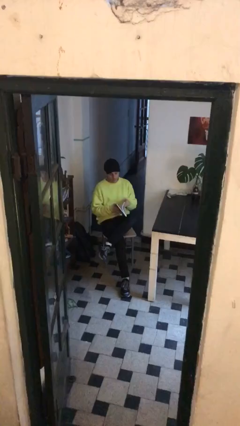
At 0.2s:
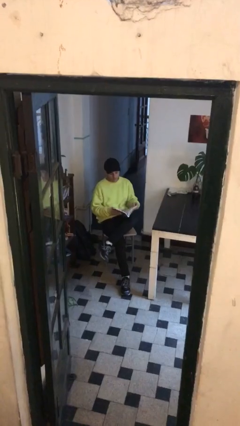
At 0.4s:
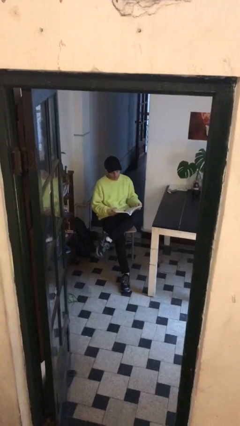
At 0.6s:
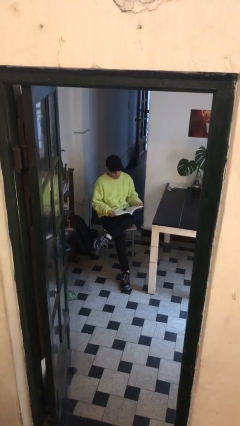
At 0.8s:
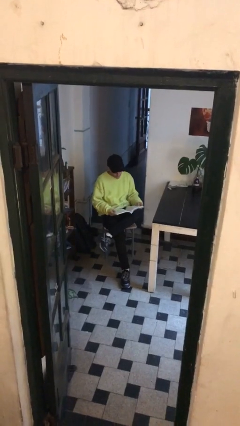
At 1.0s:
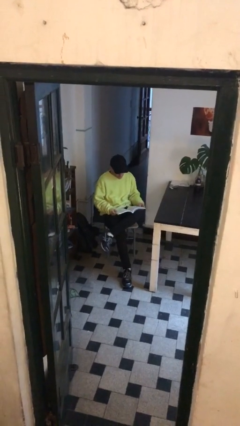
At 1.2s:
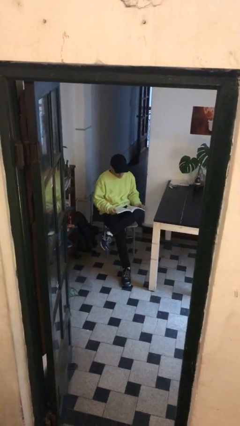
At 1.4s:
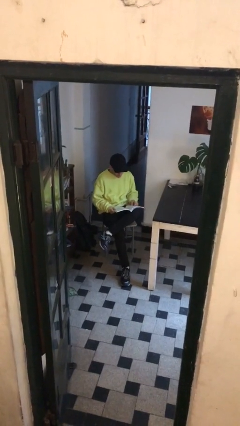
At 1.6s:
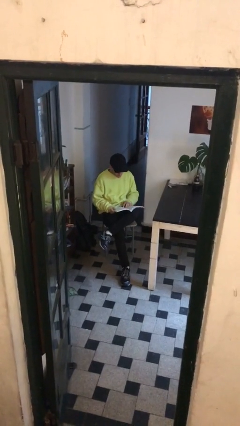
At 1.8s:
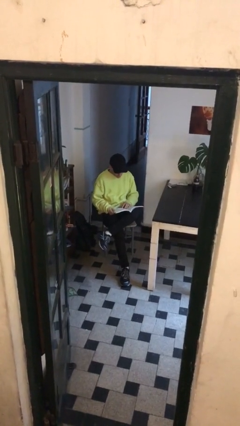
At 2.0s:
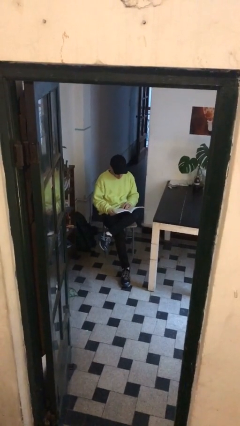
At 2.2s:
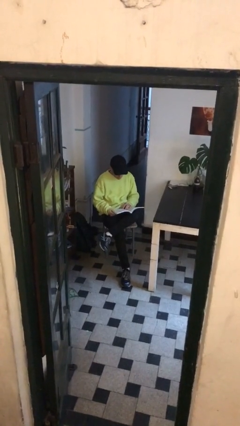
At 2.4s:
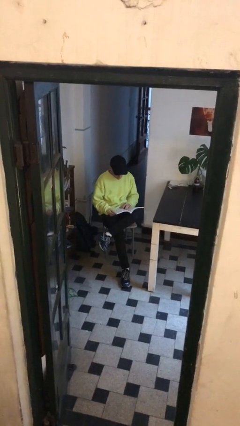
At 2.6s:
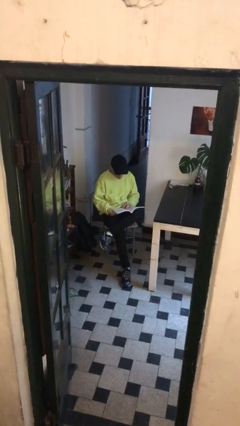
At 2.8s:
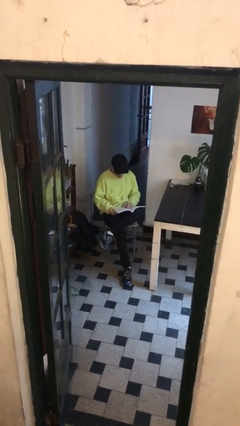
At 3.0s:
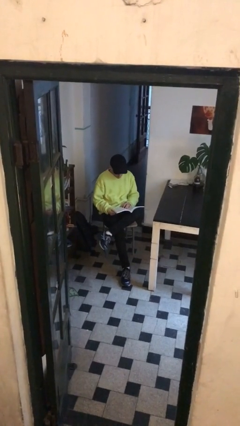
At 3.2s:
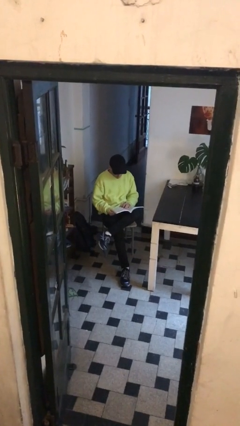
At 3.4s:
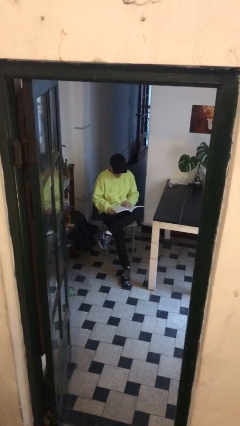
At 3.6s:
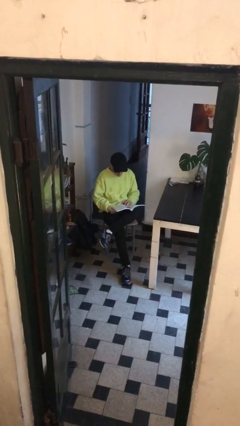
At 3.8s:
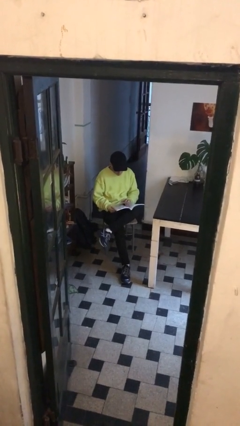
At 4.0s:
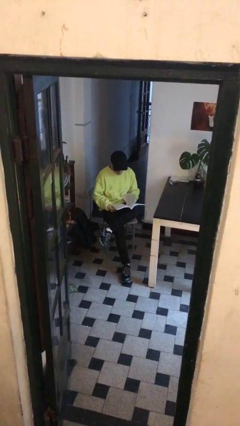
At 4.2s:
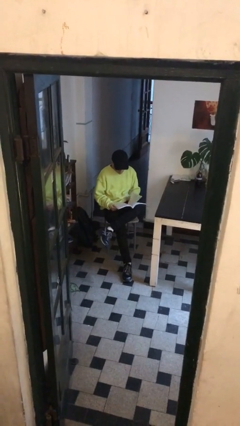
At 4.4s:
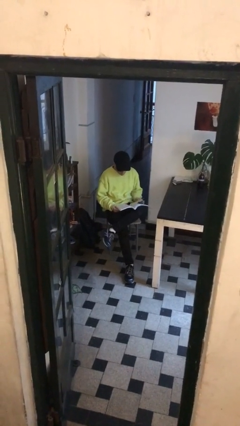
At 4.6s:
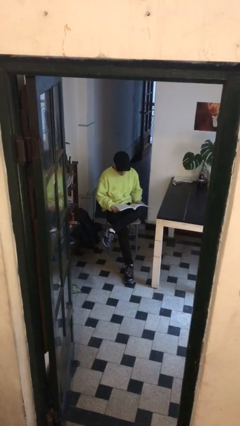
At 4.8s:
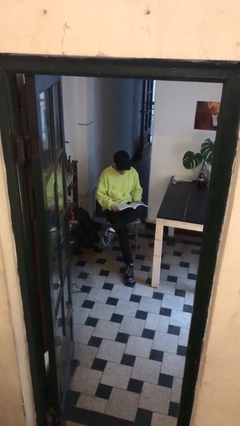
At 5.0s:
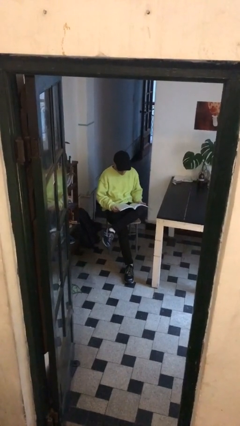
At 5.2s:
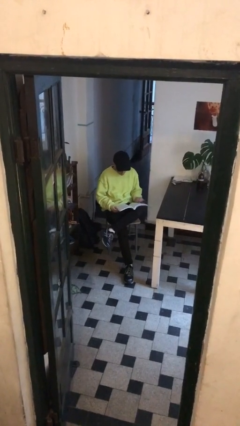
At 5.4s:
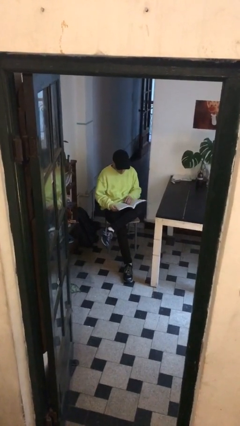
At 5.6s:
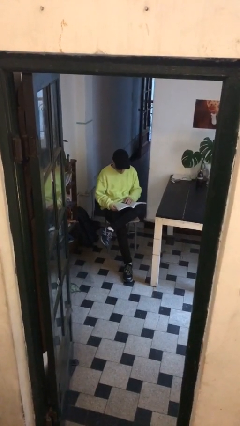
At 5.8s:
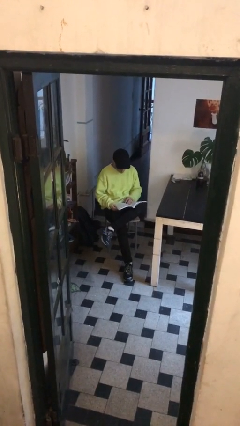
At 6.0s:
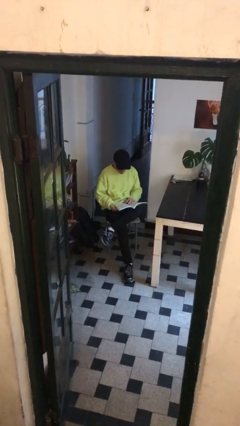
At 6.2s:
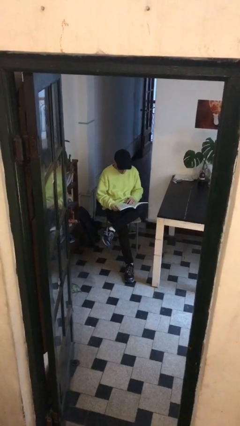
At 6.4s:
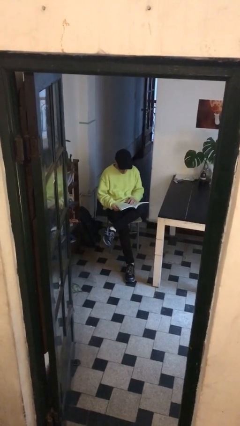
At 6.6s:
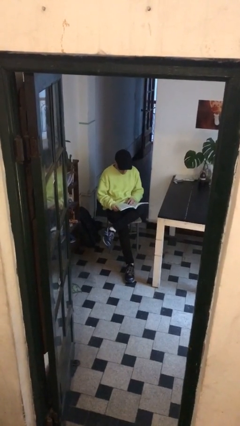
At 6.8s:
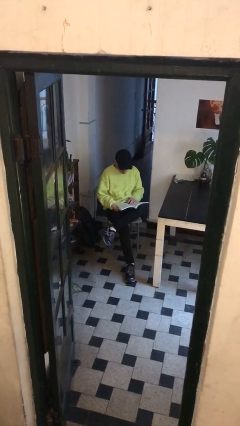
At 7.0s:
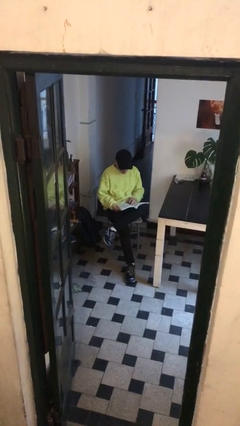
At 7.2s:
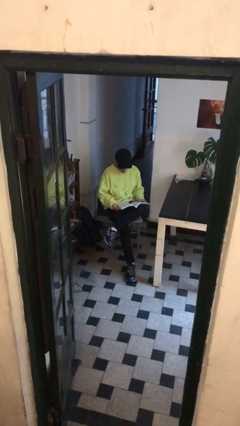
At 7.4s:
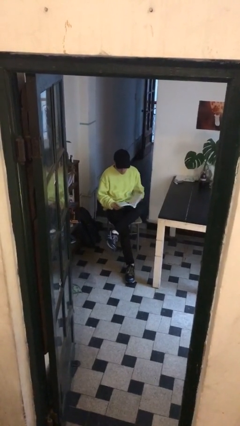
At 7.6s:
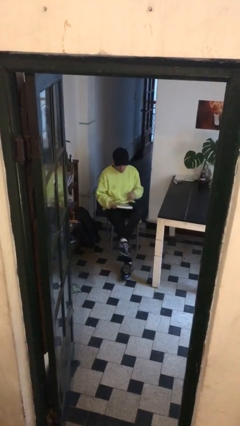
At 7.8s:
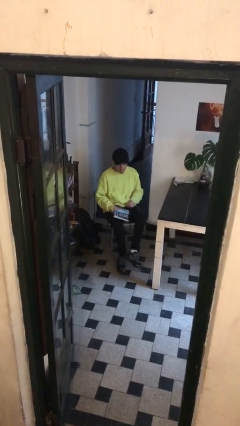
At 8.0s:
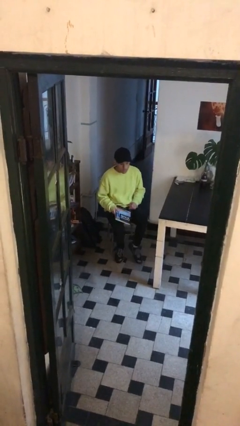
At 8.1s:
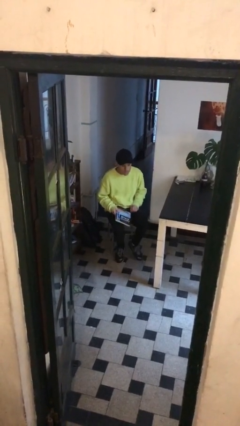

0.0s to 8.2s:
person reads document

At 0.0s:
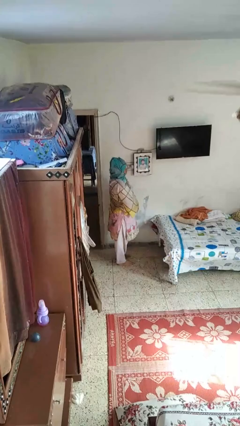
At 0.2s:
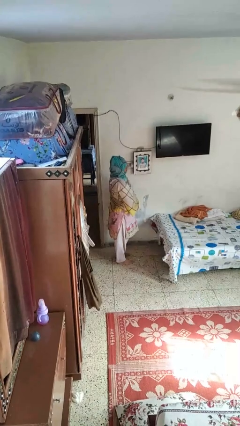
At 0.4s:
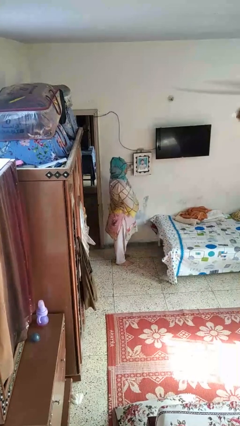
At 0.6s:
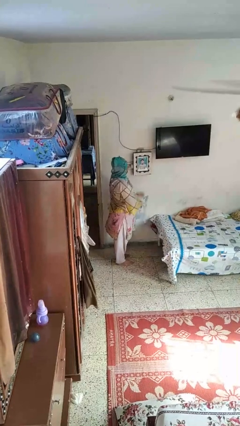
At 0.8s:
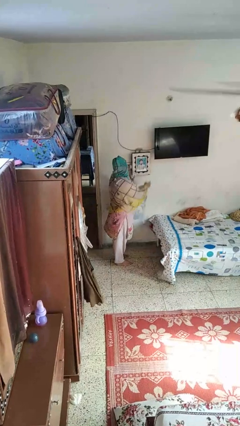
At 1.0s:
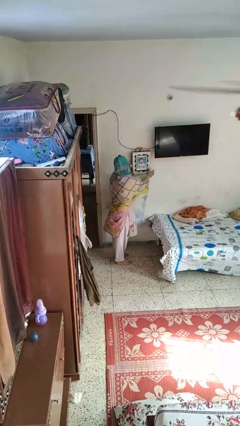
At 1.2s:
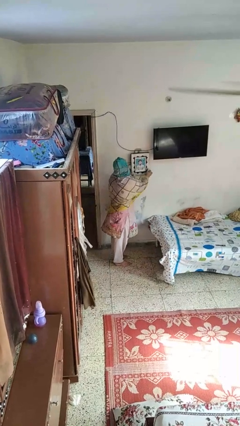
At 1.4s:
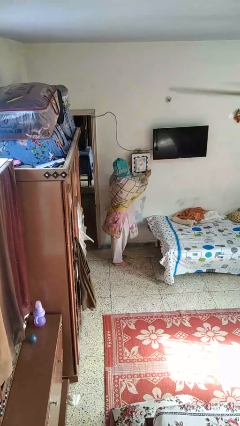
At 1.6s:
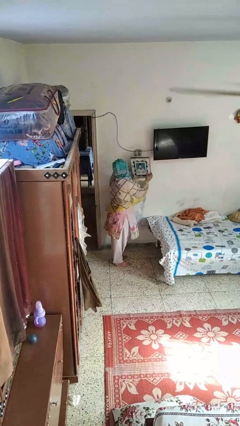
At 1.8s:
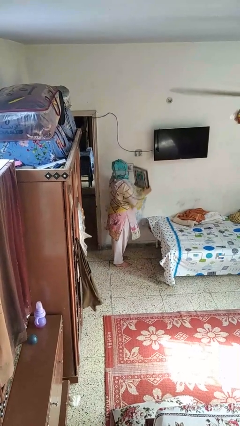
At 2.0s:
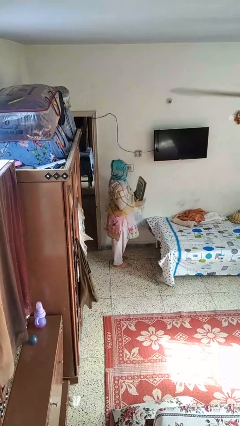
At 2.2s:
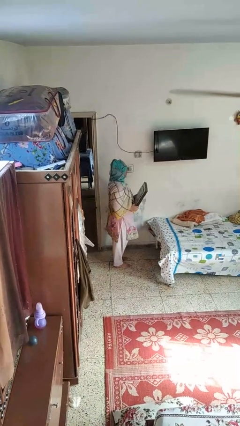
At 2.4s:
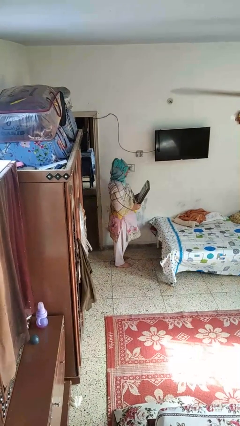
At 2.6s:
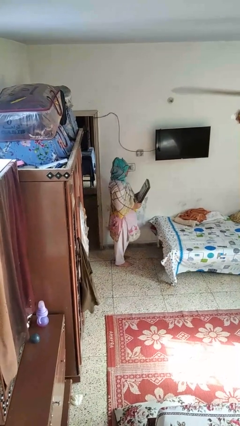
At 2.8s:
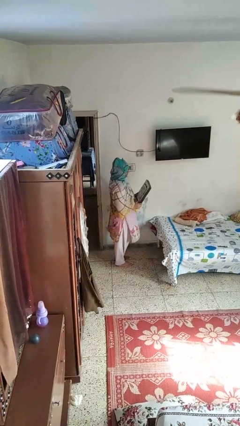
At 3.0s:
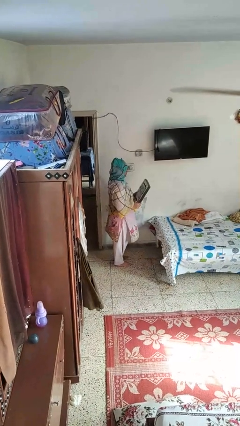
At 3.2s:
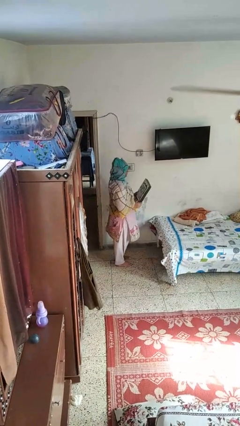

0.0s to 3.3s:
person takes down picture frame

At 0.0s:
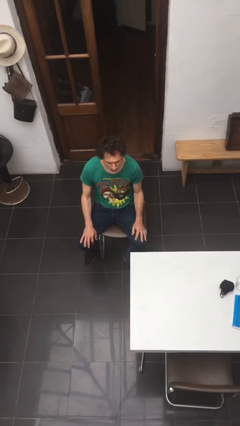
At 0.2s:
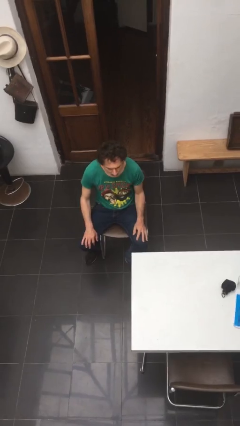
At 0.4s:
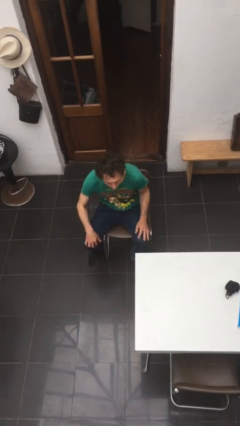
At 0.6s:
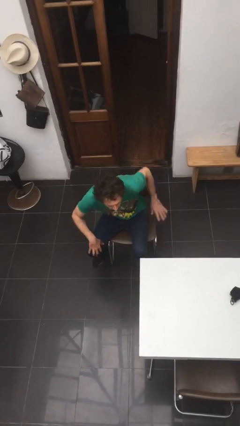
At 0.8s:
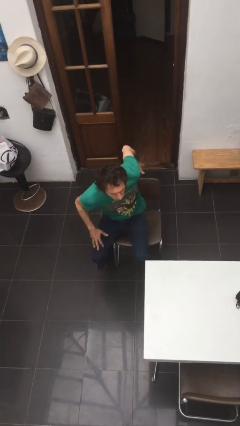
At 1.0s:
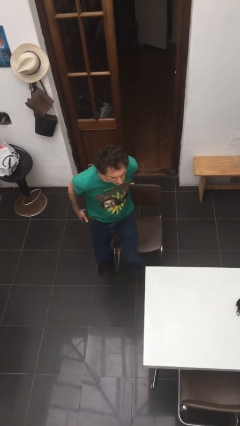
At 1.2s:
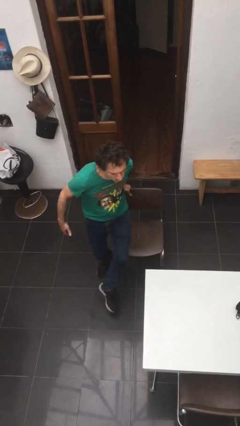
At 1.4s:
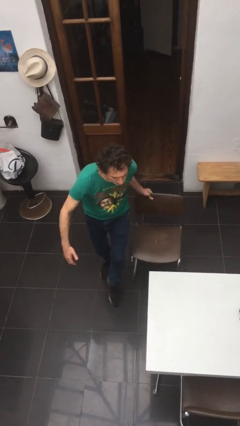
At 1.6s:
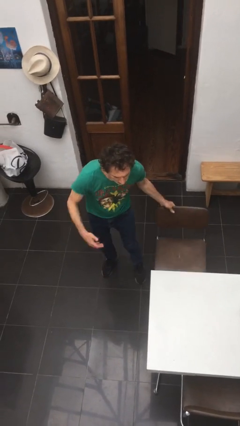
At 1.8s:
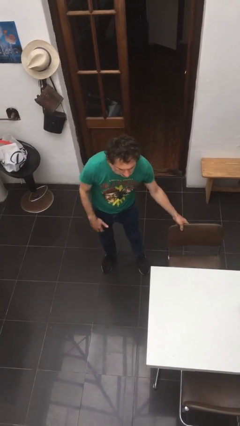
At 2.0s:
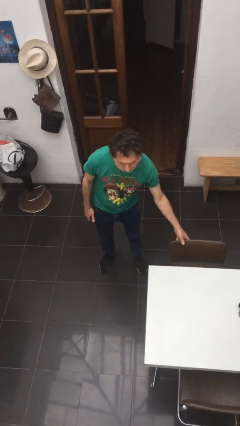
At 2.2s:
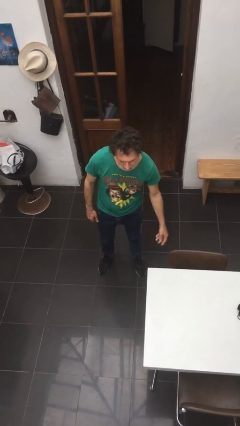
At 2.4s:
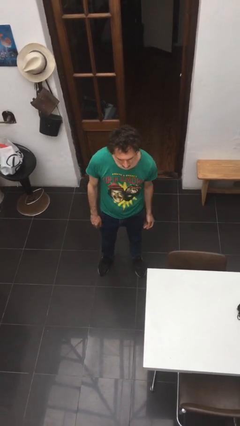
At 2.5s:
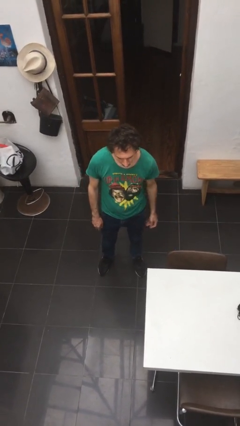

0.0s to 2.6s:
person stands up

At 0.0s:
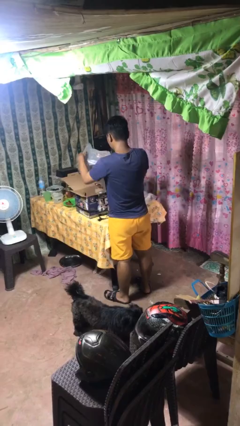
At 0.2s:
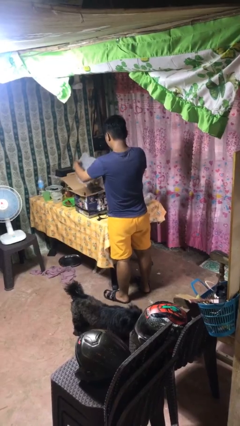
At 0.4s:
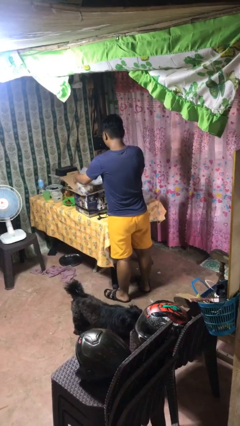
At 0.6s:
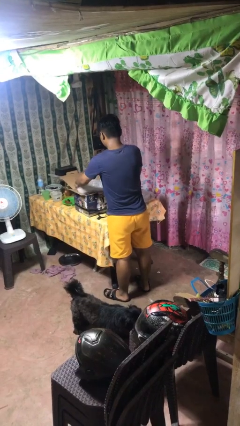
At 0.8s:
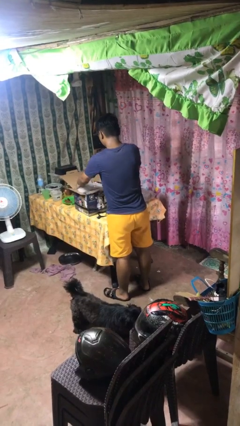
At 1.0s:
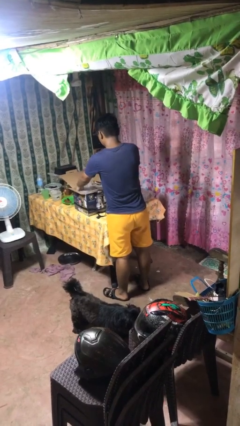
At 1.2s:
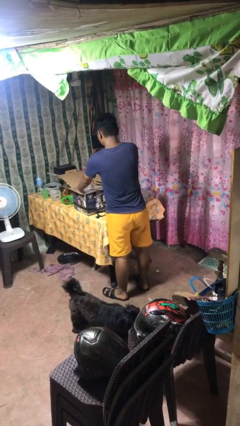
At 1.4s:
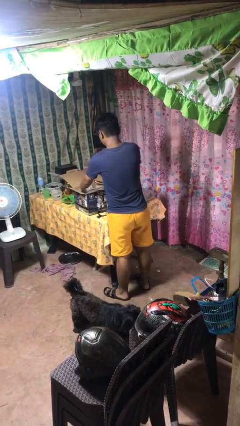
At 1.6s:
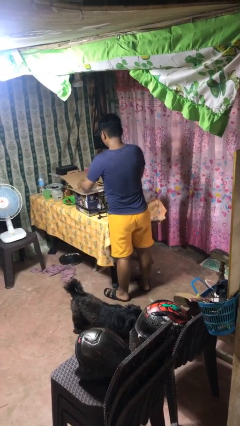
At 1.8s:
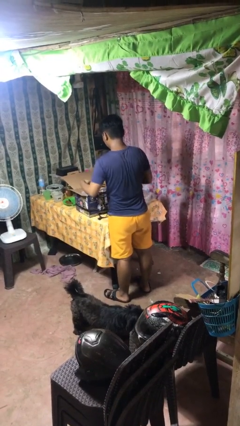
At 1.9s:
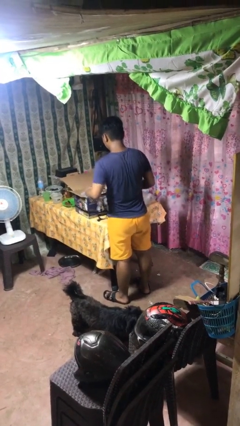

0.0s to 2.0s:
person puts object into box

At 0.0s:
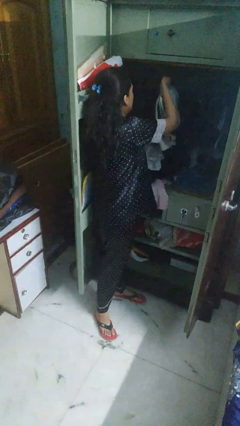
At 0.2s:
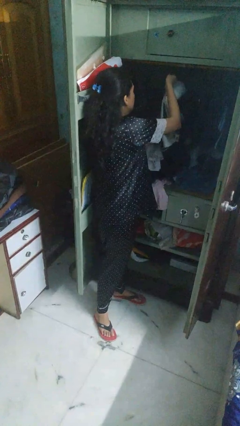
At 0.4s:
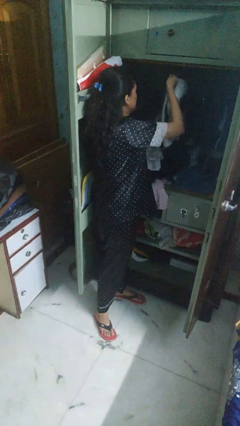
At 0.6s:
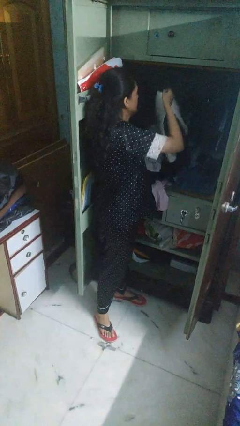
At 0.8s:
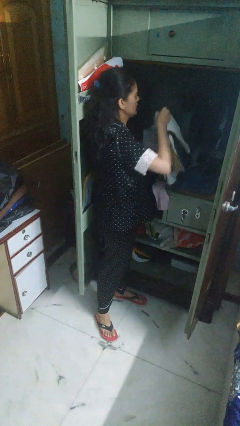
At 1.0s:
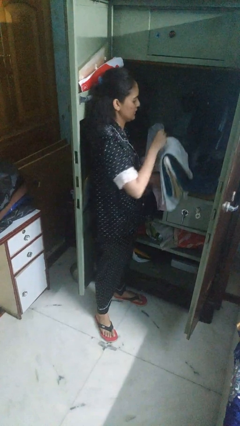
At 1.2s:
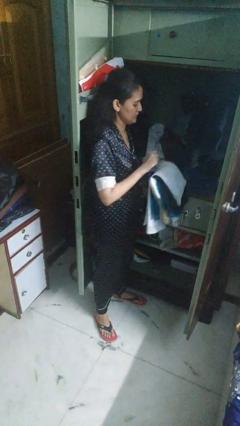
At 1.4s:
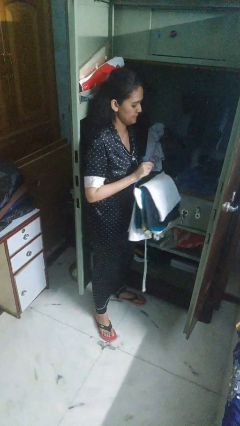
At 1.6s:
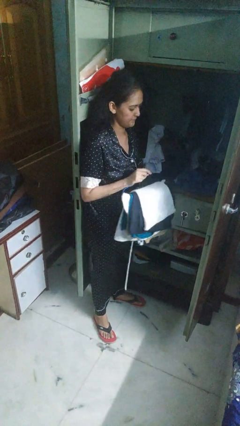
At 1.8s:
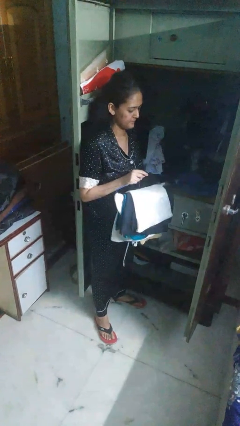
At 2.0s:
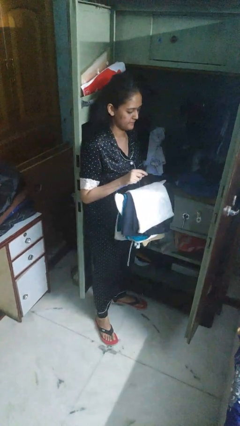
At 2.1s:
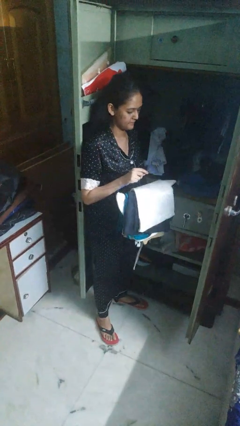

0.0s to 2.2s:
person takes clothes from closet
